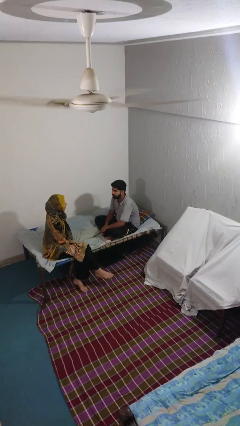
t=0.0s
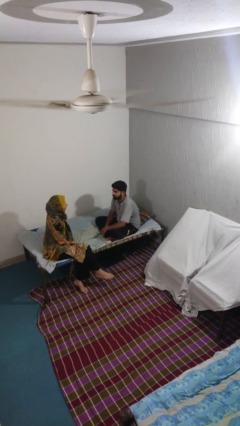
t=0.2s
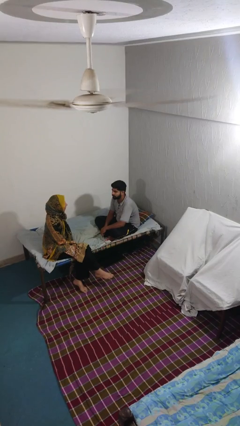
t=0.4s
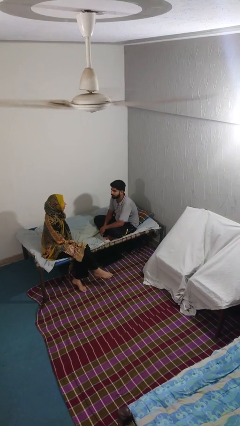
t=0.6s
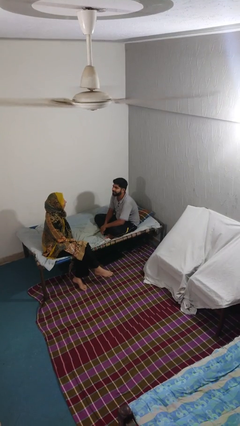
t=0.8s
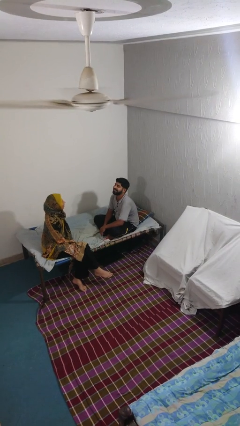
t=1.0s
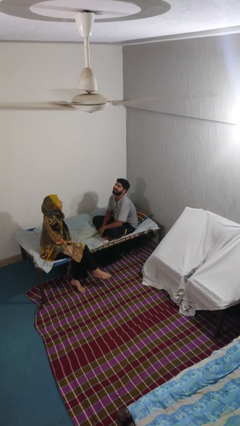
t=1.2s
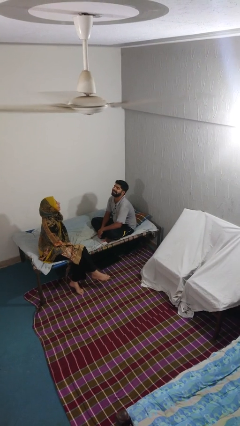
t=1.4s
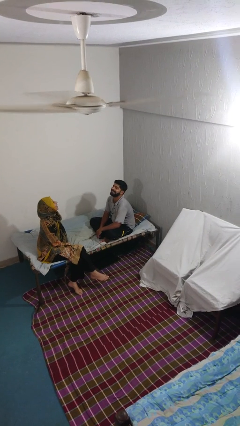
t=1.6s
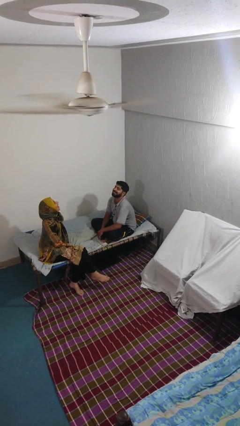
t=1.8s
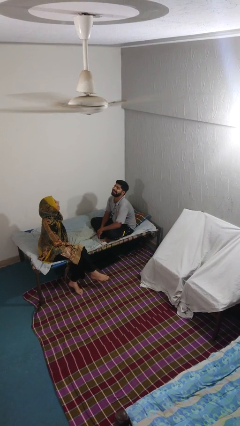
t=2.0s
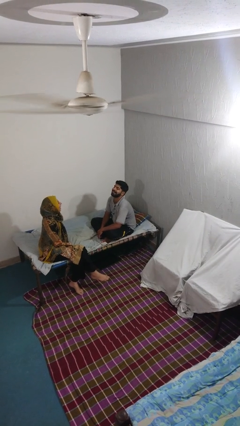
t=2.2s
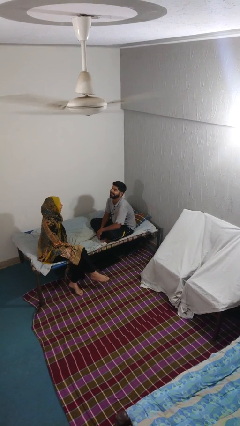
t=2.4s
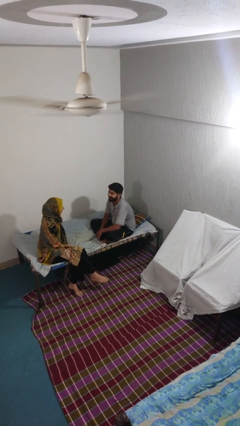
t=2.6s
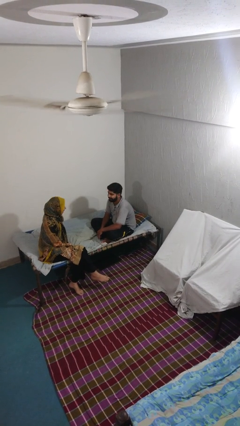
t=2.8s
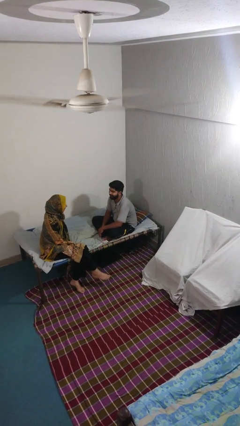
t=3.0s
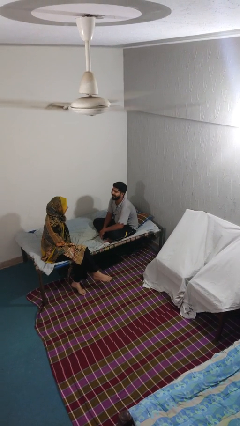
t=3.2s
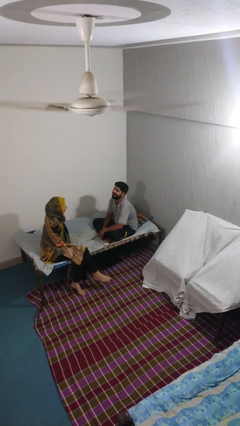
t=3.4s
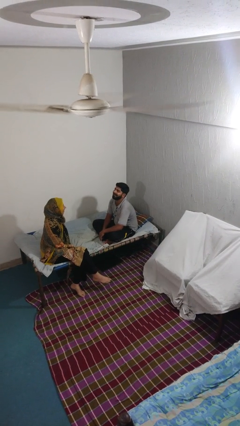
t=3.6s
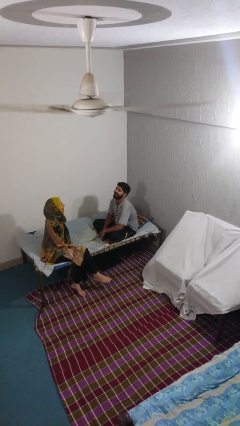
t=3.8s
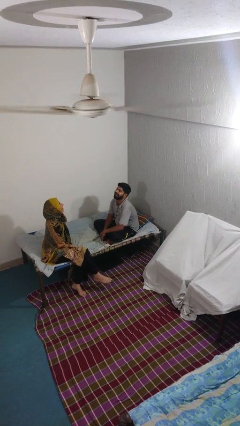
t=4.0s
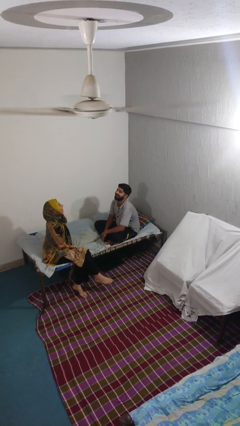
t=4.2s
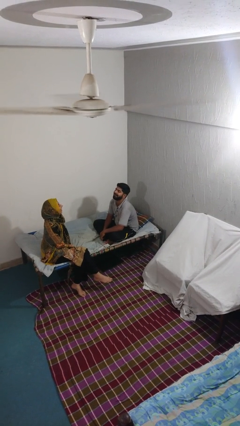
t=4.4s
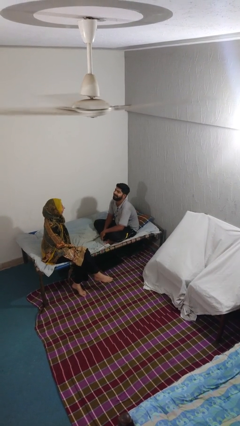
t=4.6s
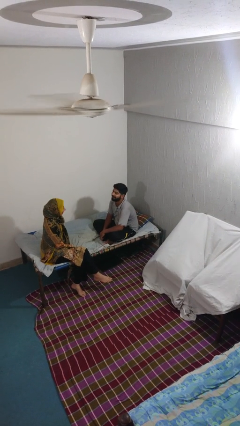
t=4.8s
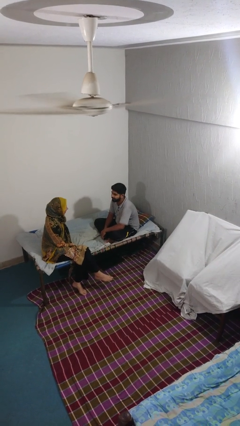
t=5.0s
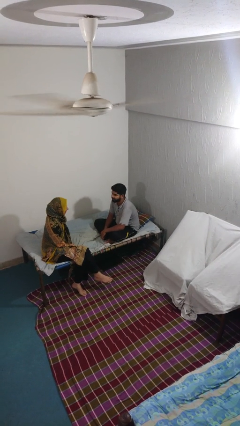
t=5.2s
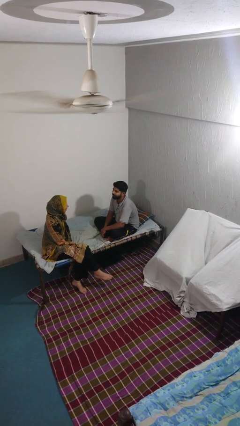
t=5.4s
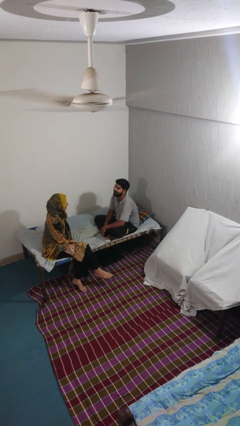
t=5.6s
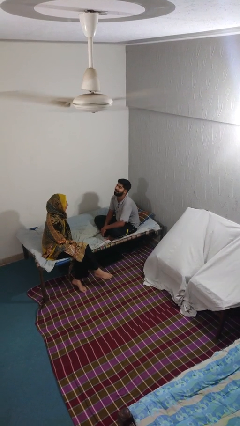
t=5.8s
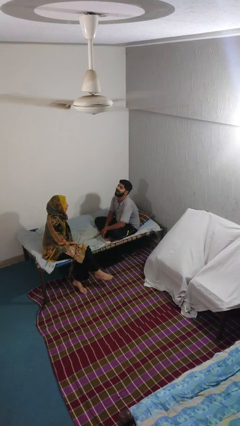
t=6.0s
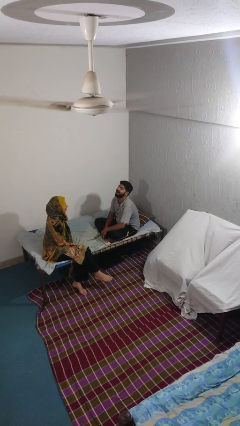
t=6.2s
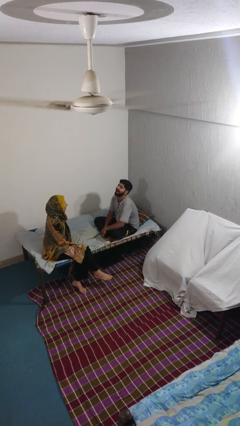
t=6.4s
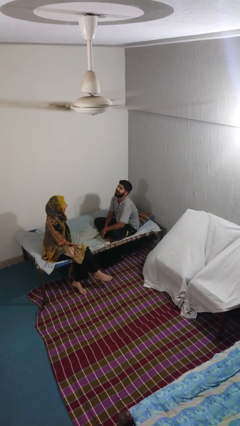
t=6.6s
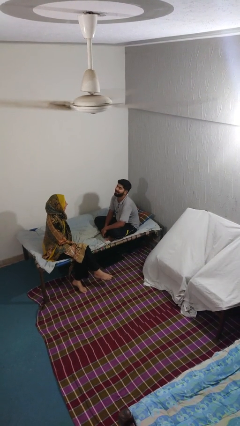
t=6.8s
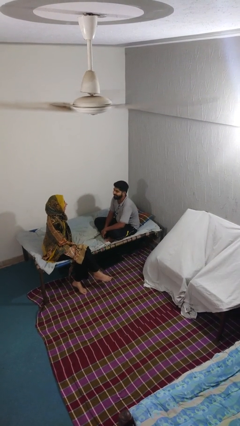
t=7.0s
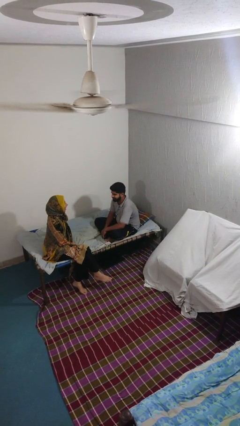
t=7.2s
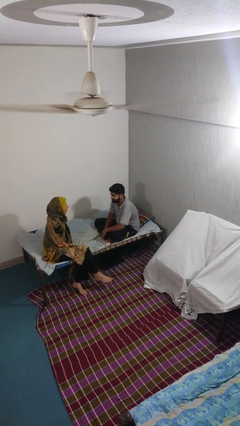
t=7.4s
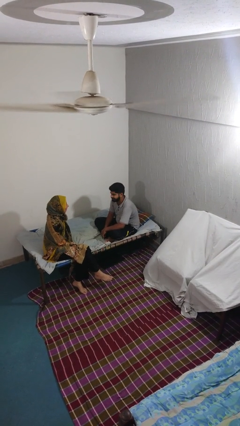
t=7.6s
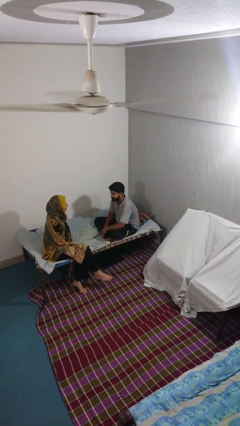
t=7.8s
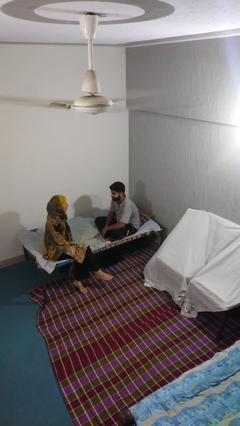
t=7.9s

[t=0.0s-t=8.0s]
person laughs with person

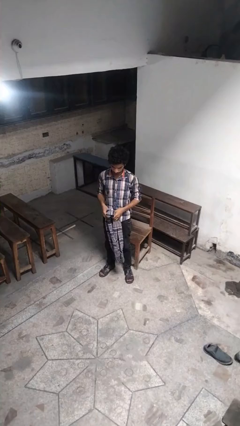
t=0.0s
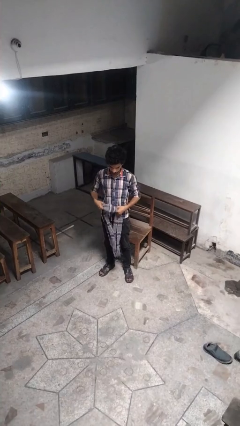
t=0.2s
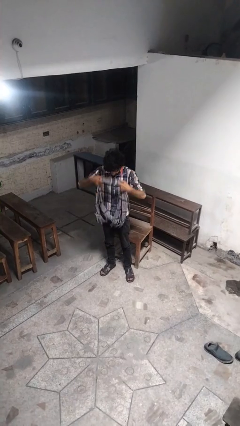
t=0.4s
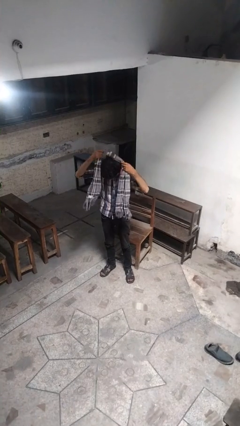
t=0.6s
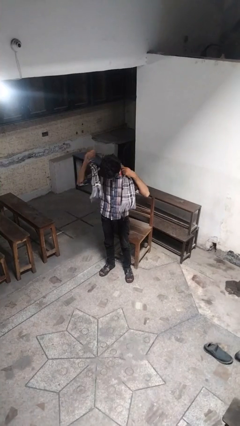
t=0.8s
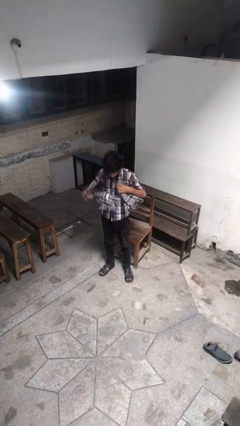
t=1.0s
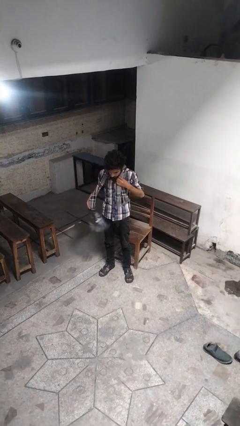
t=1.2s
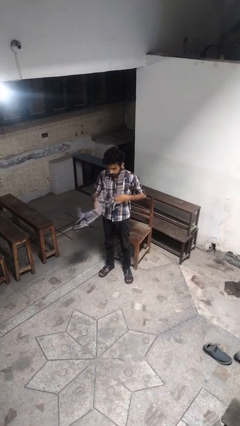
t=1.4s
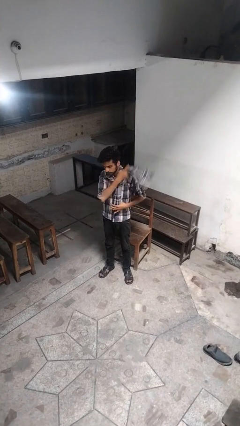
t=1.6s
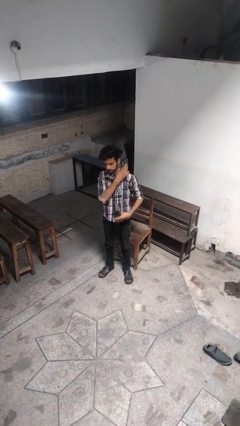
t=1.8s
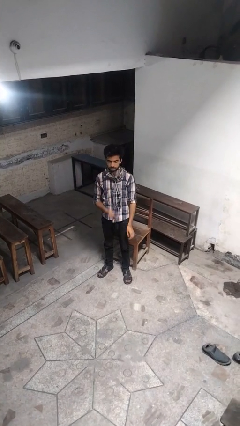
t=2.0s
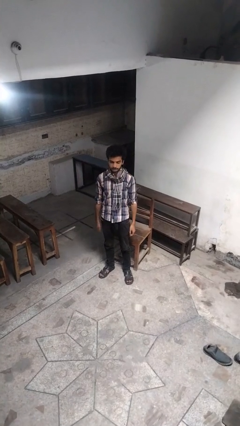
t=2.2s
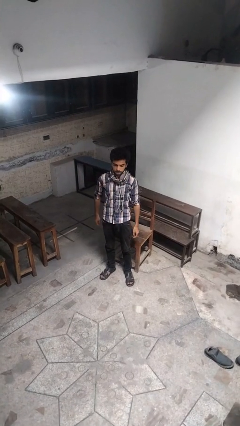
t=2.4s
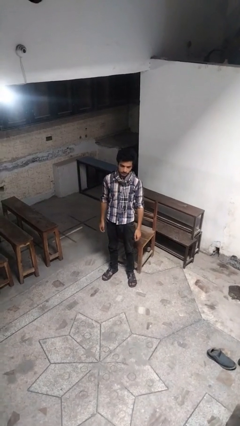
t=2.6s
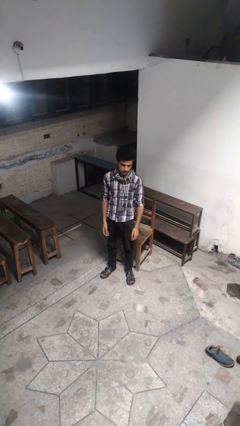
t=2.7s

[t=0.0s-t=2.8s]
person puts on scarf

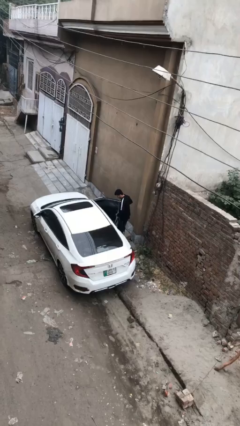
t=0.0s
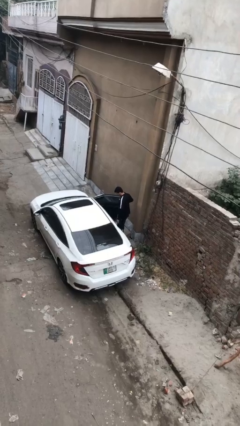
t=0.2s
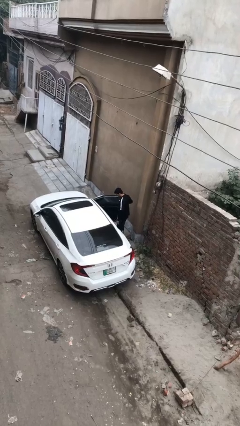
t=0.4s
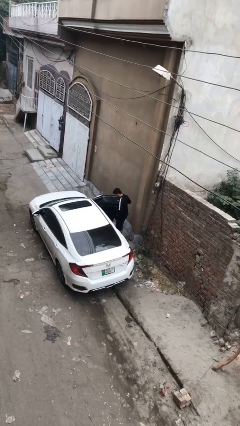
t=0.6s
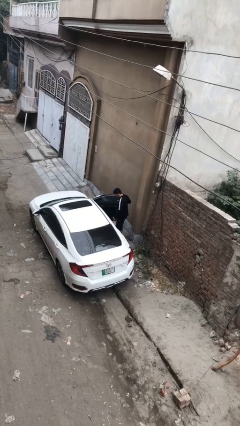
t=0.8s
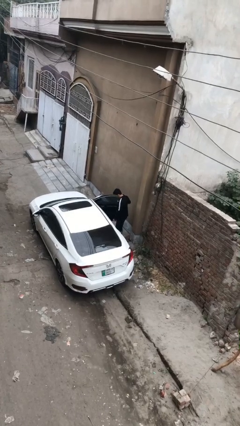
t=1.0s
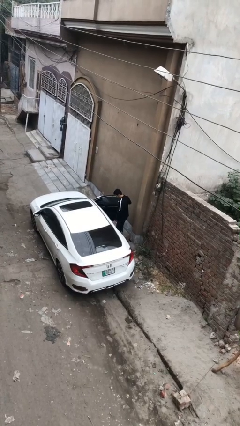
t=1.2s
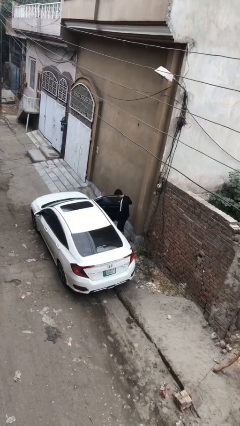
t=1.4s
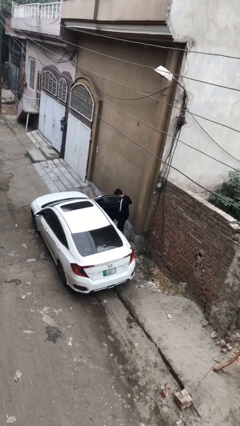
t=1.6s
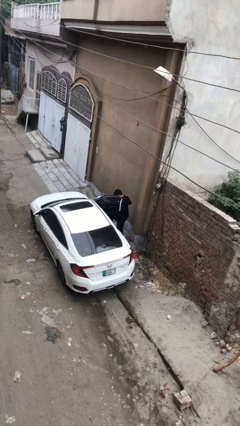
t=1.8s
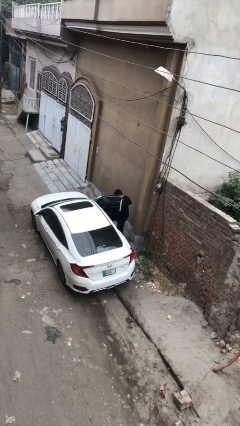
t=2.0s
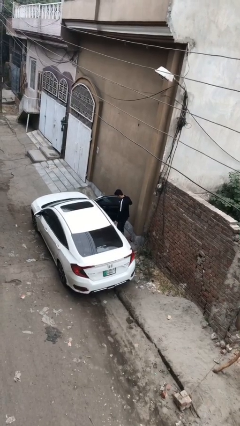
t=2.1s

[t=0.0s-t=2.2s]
person opens car door

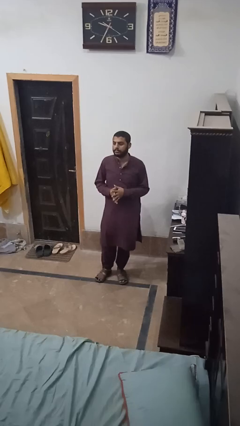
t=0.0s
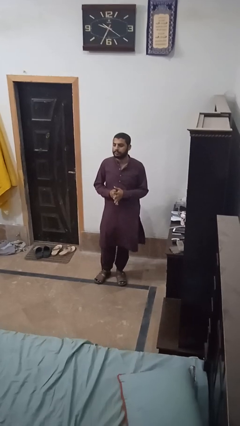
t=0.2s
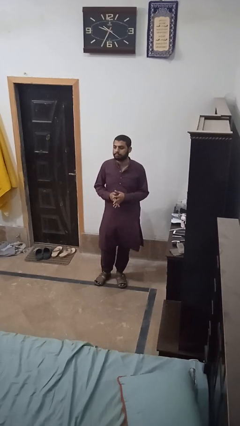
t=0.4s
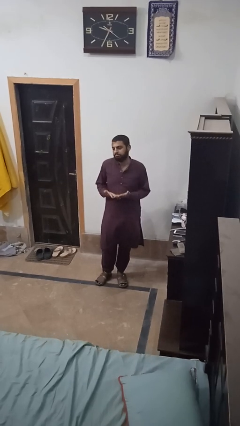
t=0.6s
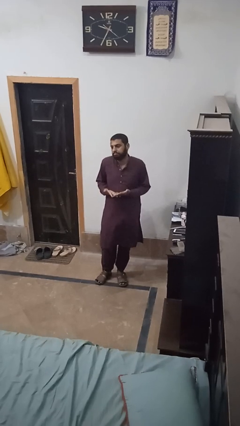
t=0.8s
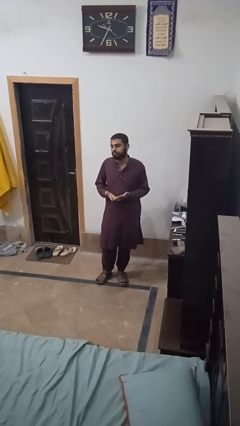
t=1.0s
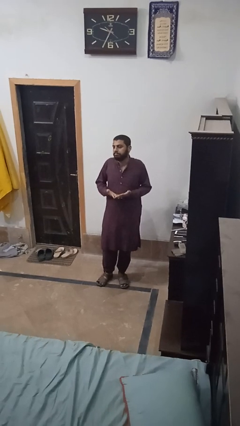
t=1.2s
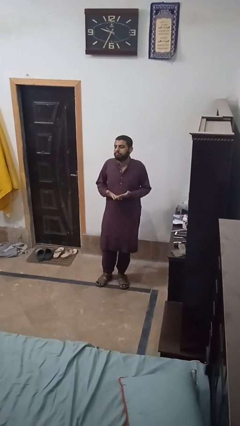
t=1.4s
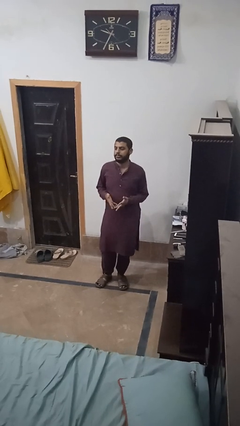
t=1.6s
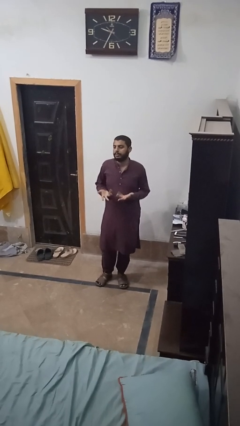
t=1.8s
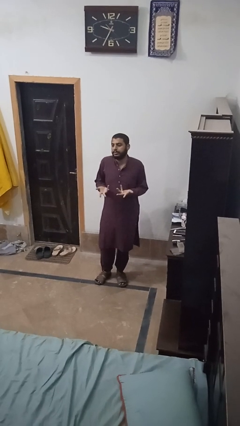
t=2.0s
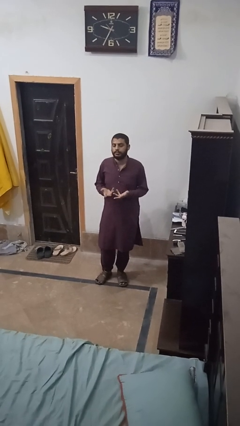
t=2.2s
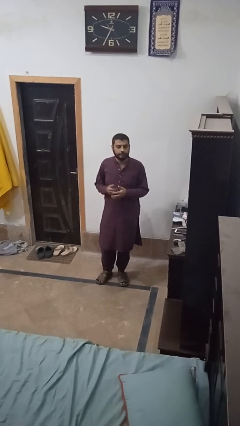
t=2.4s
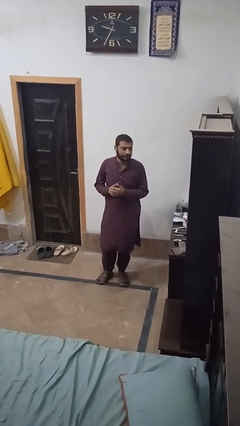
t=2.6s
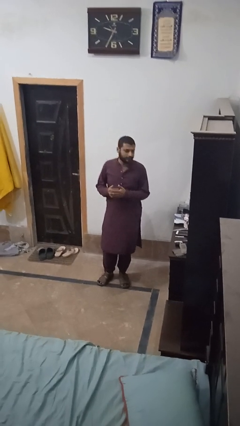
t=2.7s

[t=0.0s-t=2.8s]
person shrugs

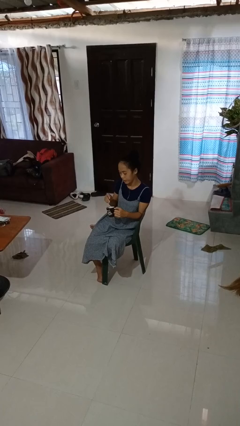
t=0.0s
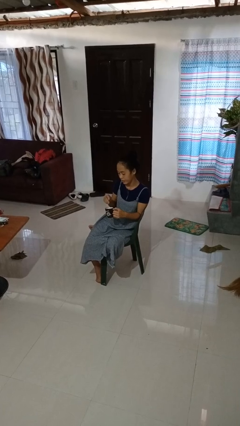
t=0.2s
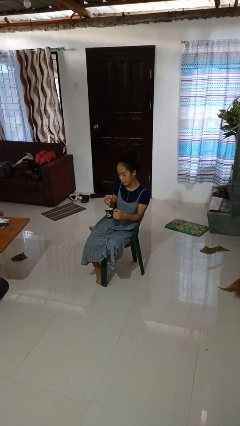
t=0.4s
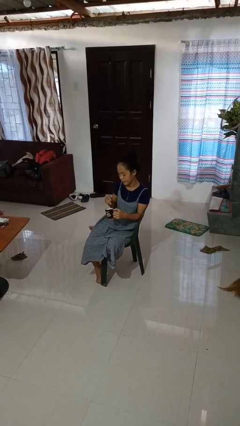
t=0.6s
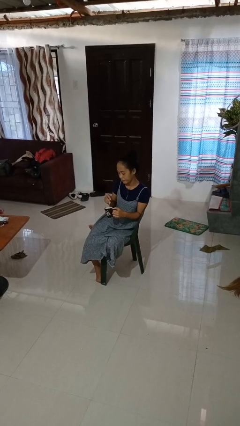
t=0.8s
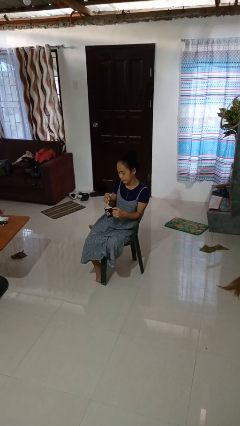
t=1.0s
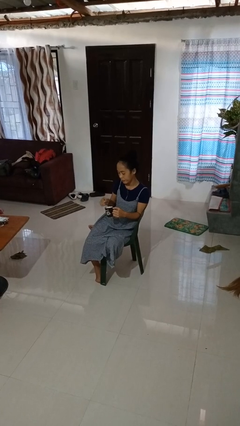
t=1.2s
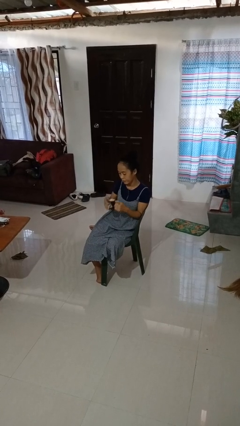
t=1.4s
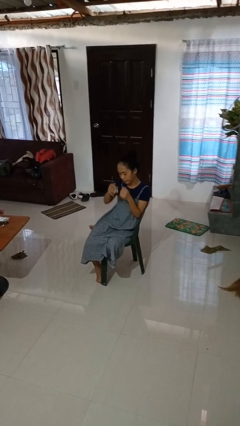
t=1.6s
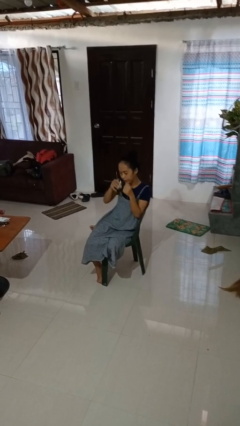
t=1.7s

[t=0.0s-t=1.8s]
person stirs mug

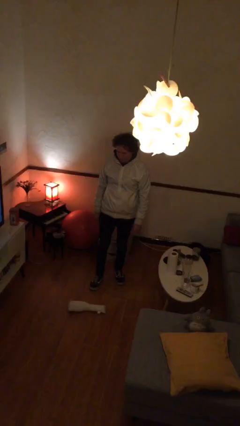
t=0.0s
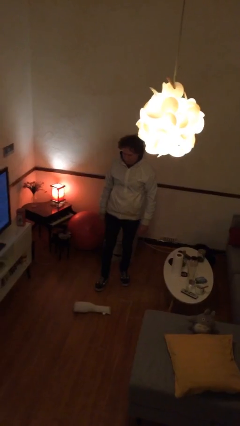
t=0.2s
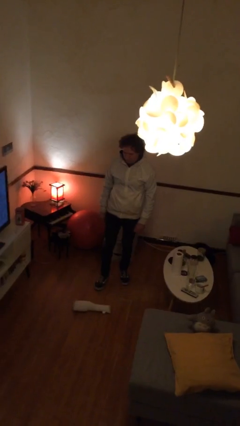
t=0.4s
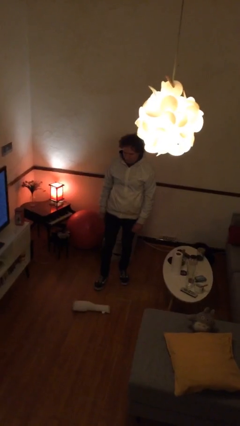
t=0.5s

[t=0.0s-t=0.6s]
person stands up from floor
